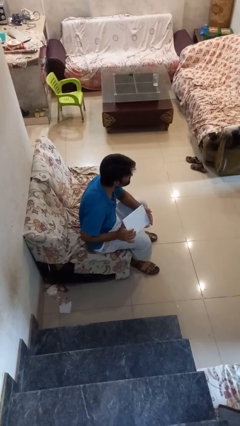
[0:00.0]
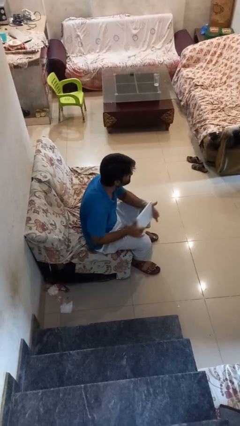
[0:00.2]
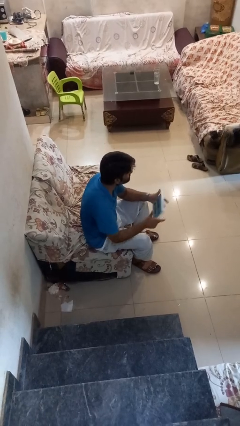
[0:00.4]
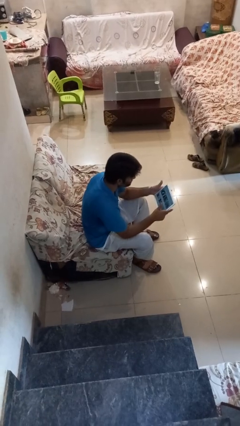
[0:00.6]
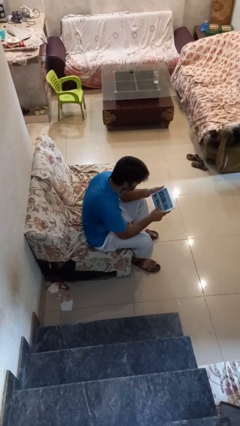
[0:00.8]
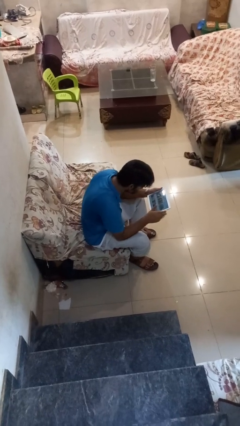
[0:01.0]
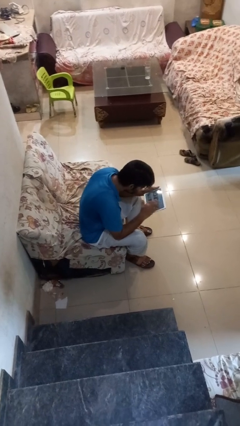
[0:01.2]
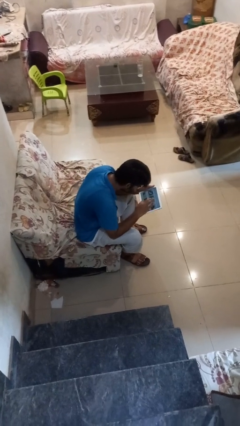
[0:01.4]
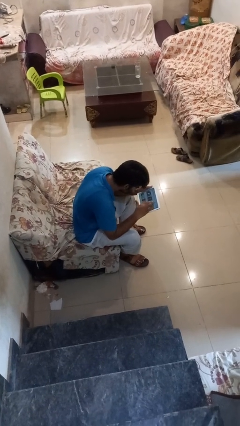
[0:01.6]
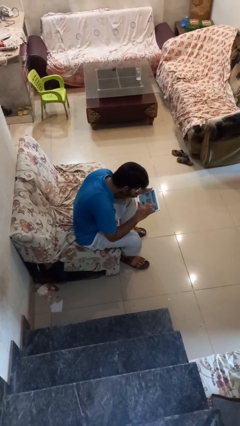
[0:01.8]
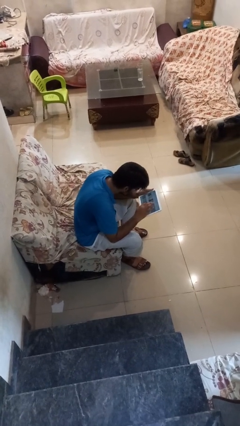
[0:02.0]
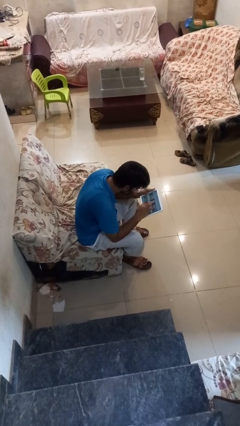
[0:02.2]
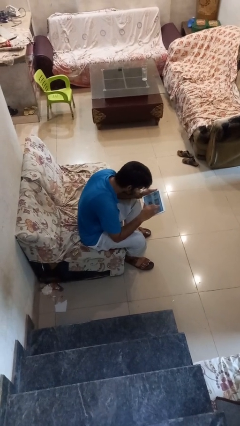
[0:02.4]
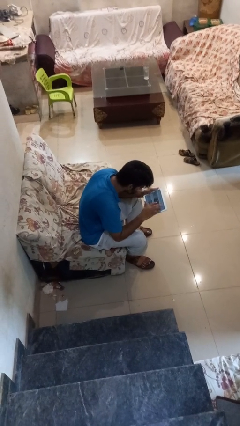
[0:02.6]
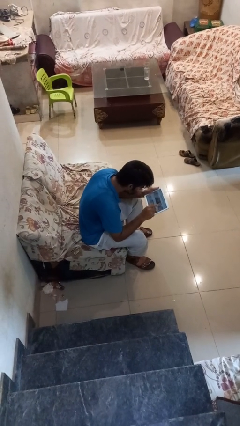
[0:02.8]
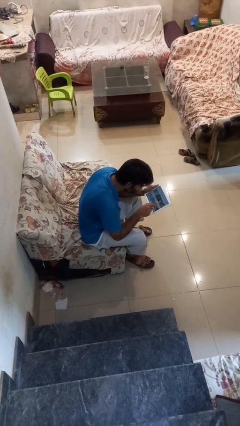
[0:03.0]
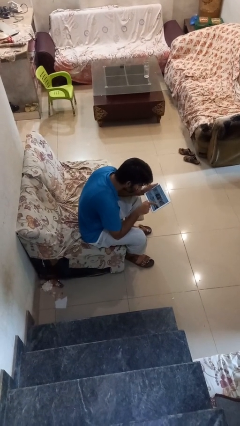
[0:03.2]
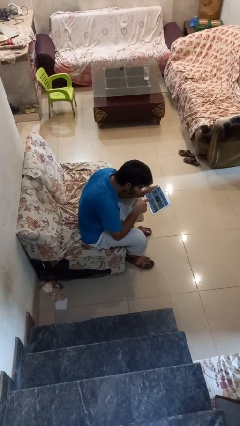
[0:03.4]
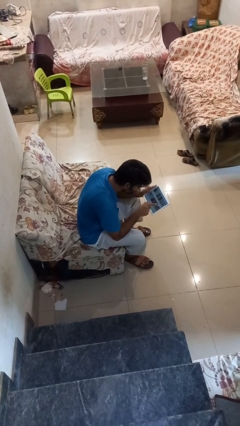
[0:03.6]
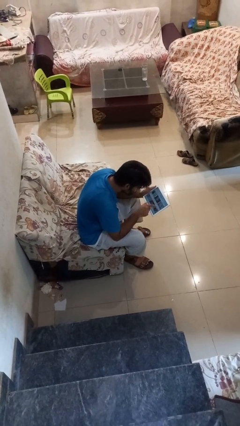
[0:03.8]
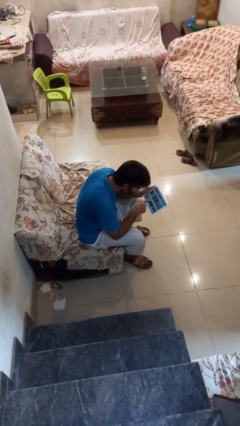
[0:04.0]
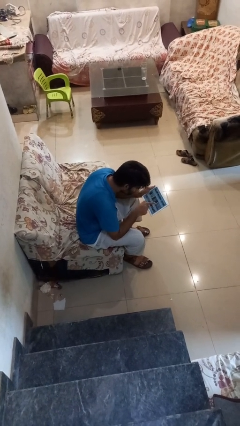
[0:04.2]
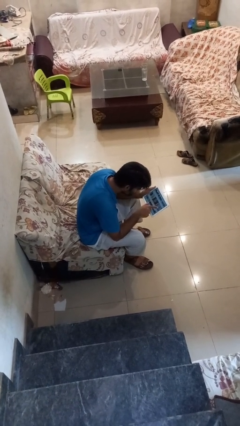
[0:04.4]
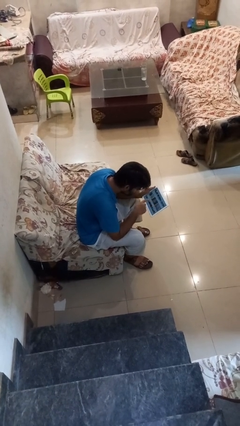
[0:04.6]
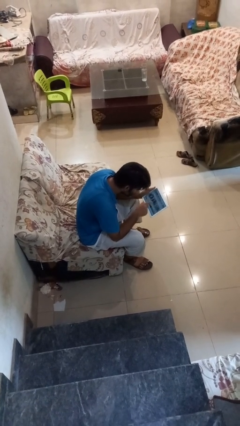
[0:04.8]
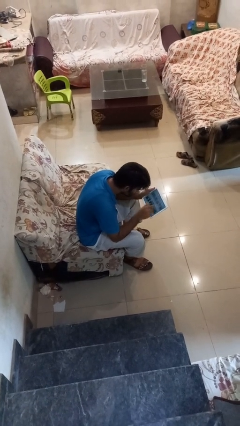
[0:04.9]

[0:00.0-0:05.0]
person interacts with tablet

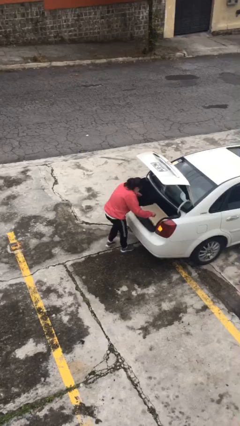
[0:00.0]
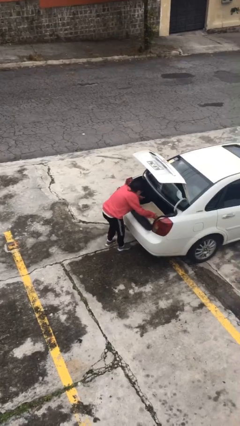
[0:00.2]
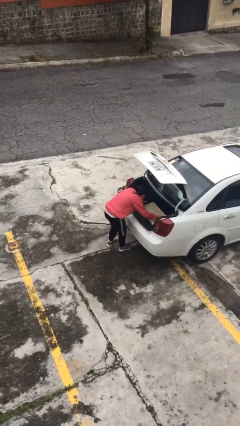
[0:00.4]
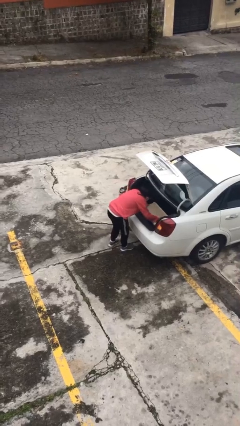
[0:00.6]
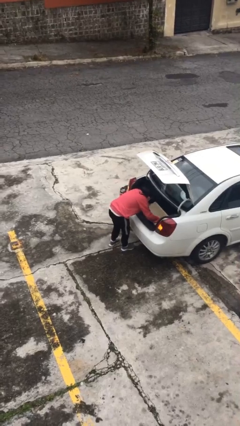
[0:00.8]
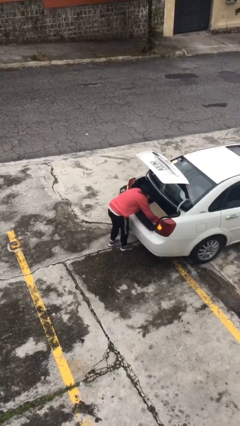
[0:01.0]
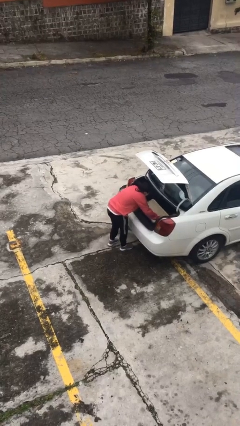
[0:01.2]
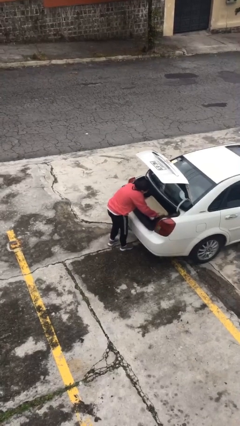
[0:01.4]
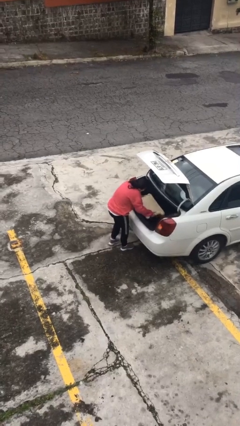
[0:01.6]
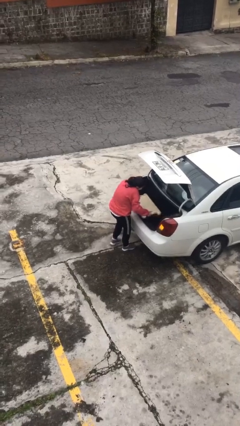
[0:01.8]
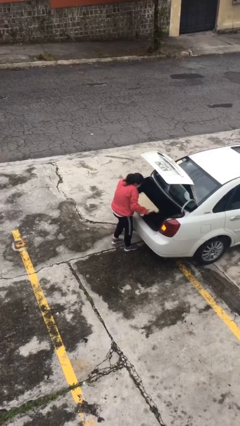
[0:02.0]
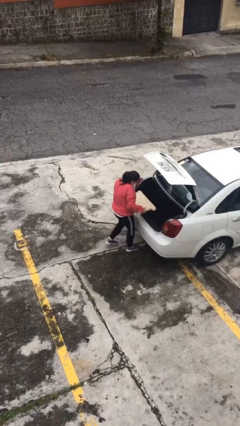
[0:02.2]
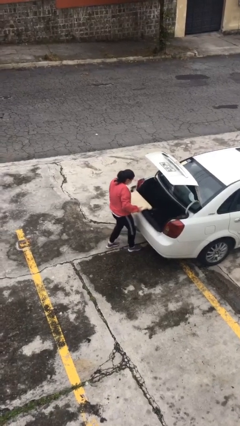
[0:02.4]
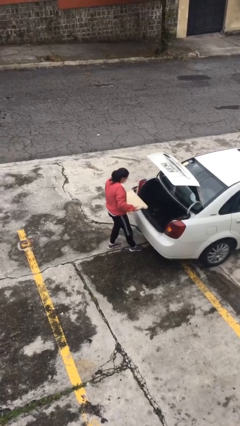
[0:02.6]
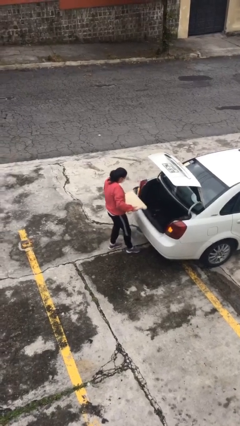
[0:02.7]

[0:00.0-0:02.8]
person unloads car

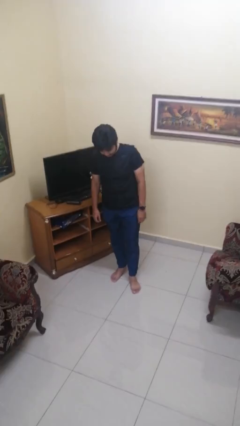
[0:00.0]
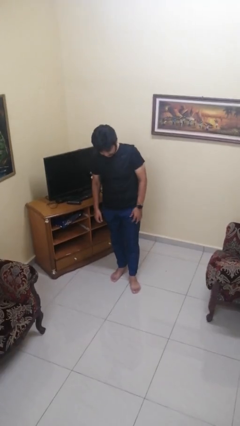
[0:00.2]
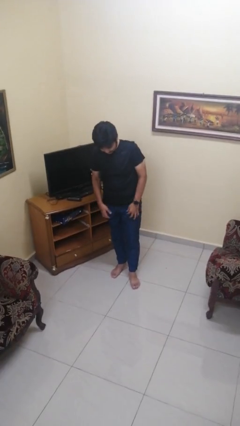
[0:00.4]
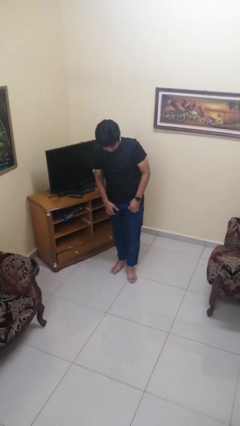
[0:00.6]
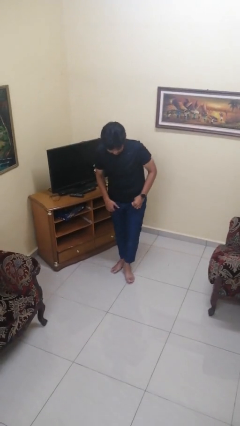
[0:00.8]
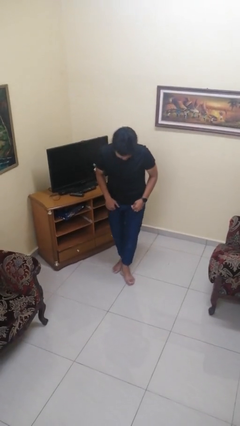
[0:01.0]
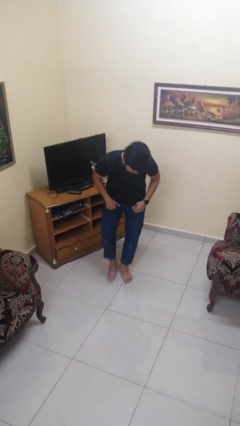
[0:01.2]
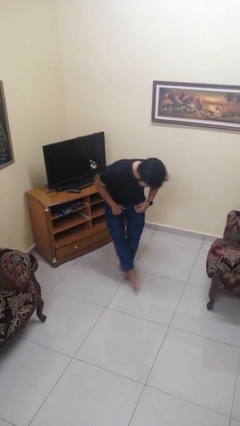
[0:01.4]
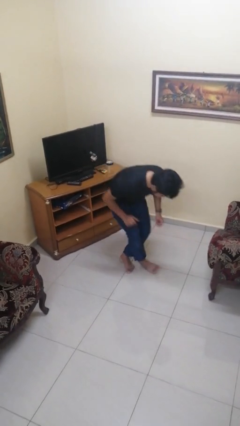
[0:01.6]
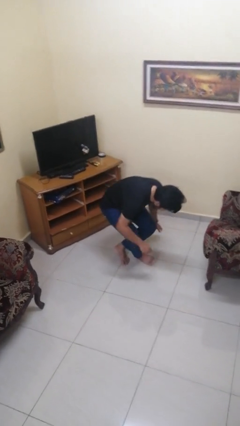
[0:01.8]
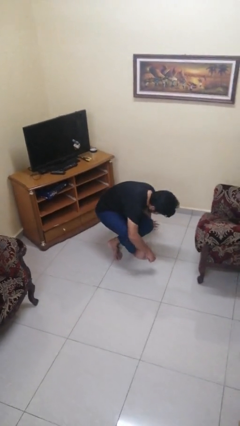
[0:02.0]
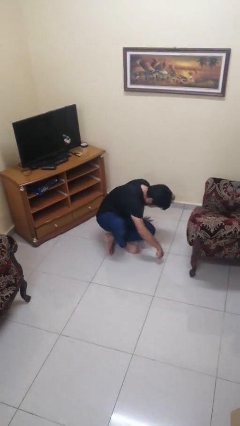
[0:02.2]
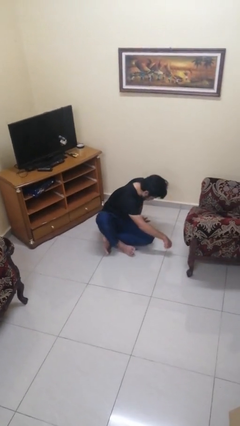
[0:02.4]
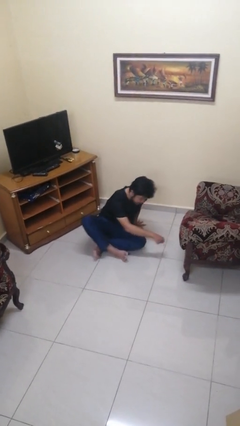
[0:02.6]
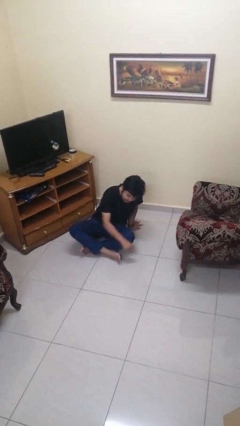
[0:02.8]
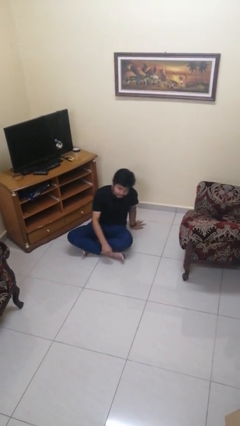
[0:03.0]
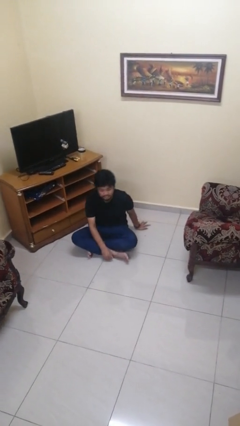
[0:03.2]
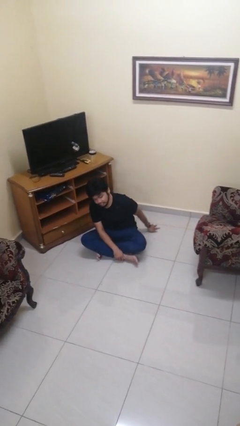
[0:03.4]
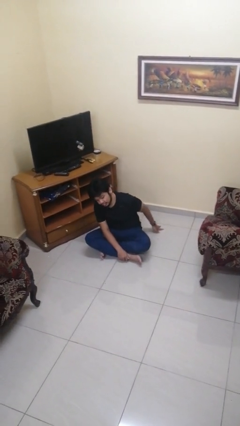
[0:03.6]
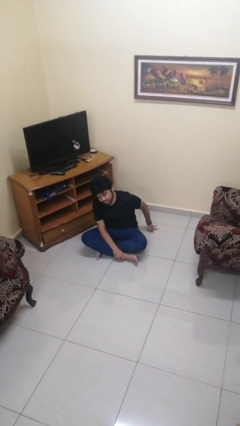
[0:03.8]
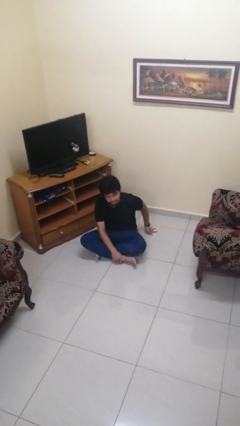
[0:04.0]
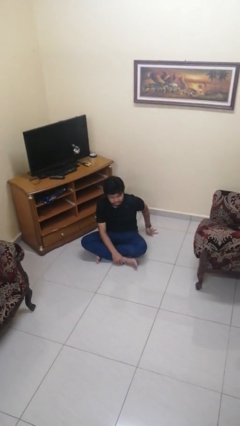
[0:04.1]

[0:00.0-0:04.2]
person sits crisscross

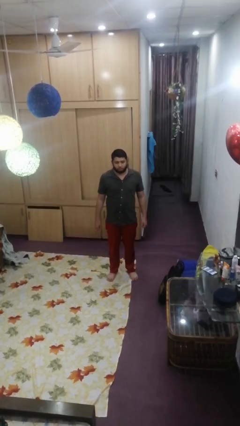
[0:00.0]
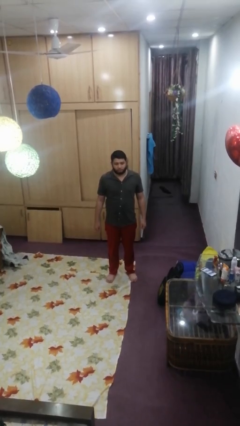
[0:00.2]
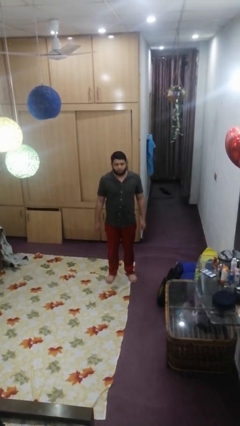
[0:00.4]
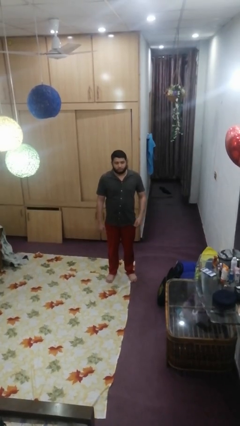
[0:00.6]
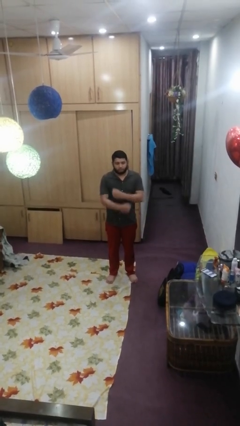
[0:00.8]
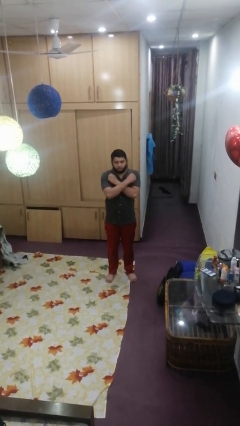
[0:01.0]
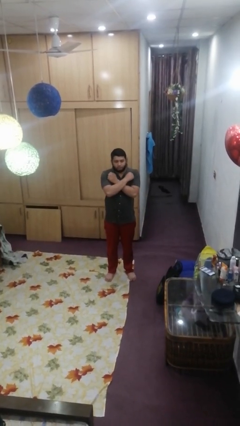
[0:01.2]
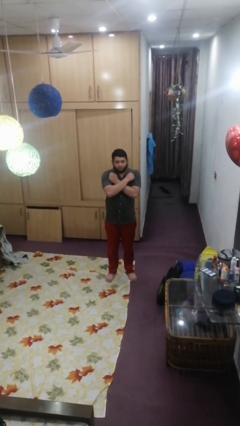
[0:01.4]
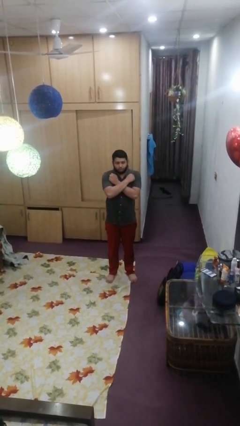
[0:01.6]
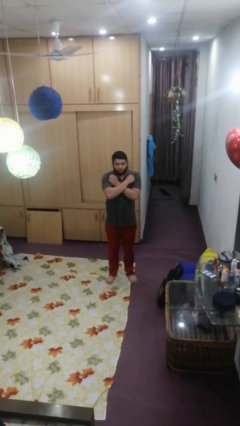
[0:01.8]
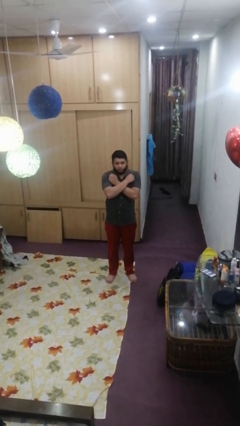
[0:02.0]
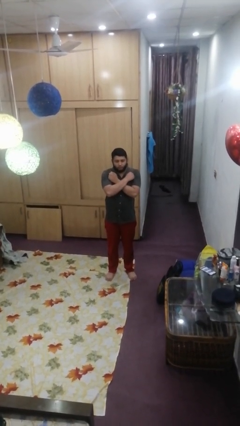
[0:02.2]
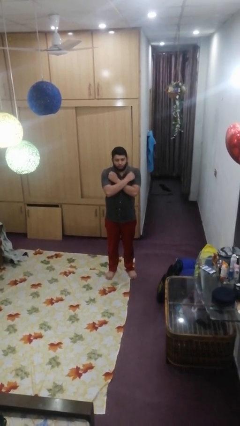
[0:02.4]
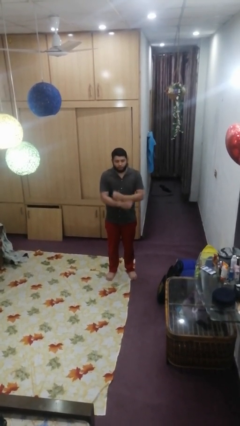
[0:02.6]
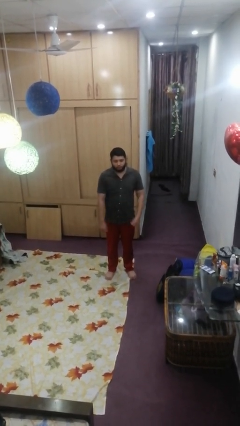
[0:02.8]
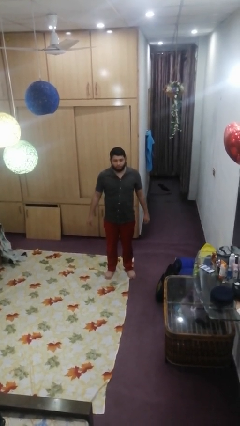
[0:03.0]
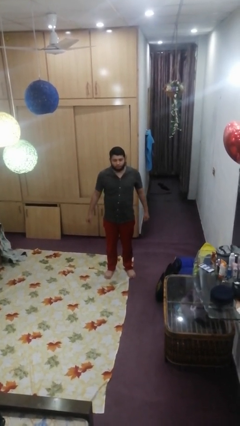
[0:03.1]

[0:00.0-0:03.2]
person crosses arms

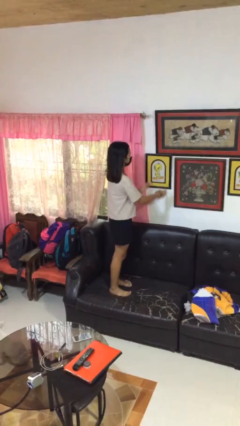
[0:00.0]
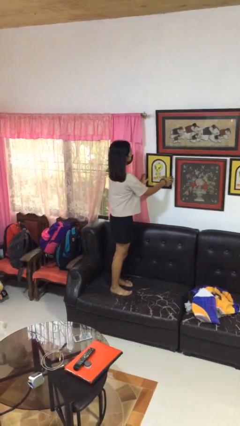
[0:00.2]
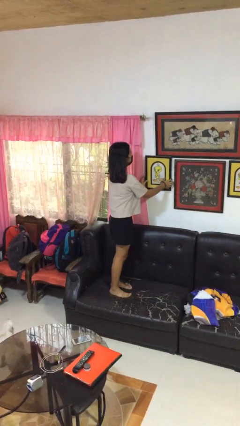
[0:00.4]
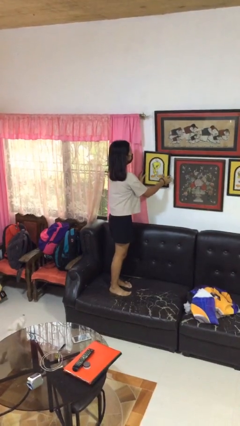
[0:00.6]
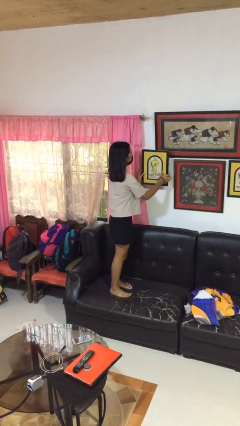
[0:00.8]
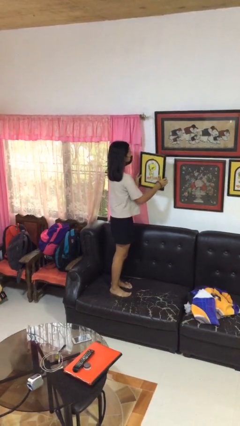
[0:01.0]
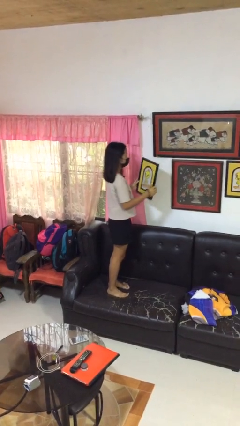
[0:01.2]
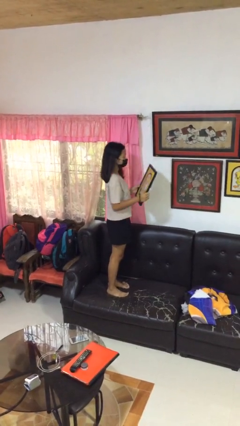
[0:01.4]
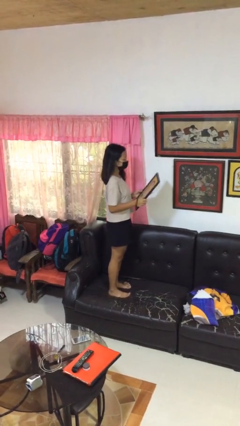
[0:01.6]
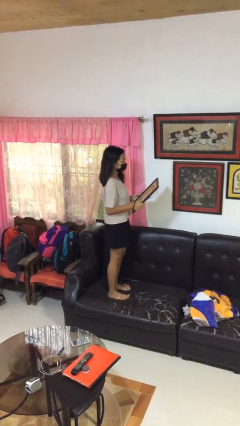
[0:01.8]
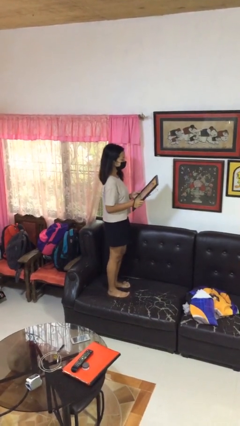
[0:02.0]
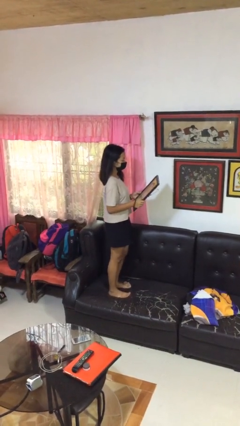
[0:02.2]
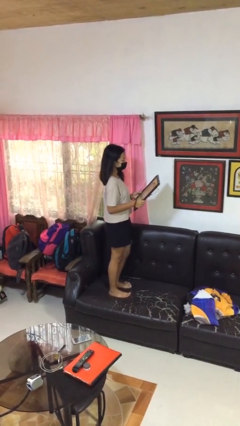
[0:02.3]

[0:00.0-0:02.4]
person takes down picture frame

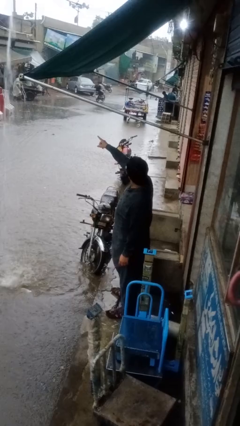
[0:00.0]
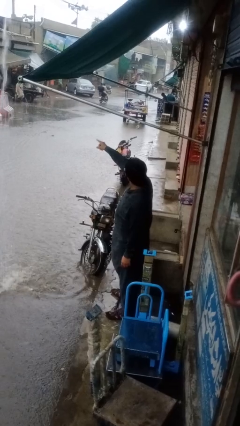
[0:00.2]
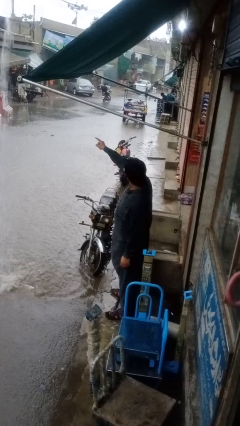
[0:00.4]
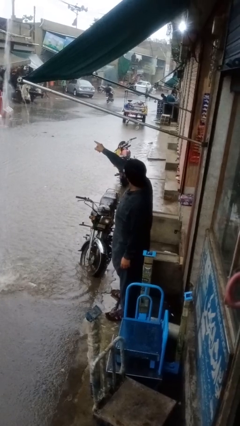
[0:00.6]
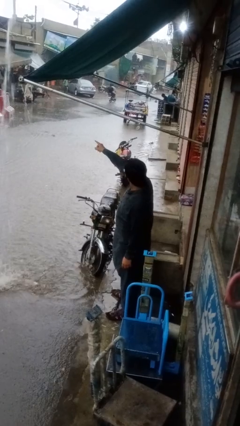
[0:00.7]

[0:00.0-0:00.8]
person points at person
